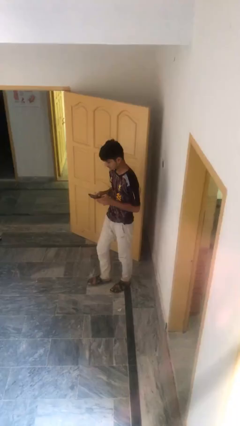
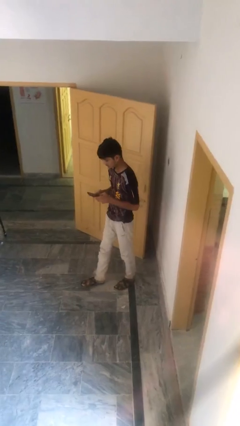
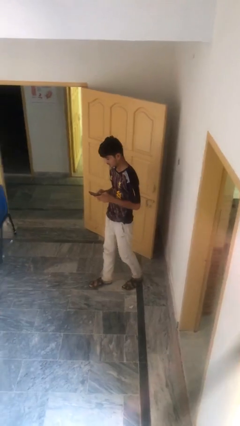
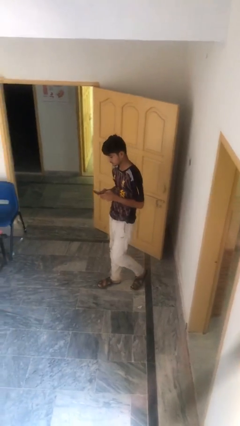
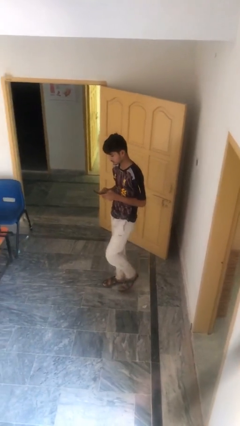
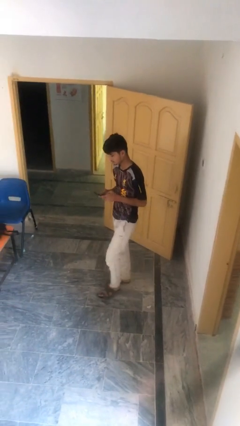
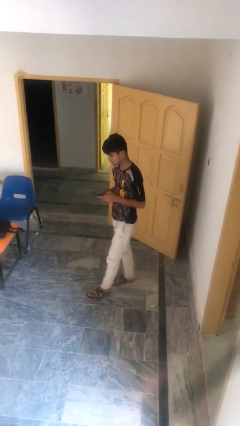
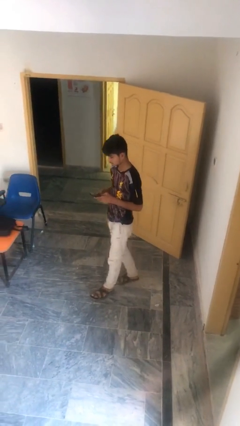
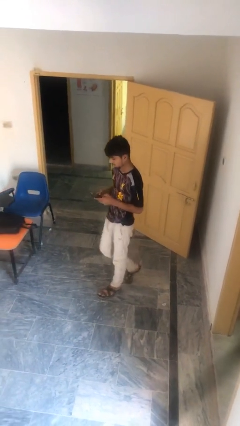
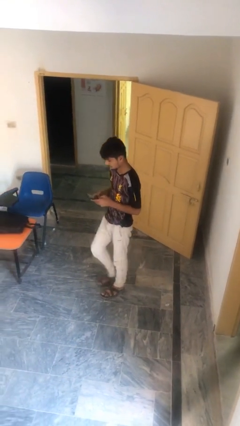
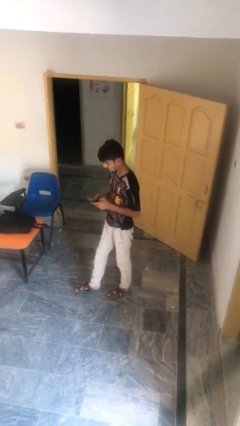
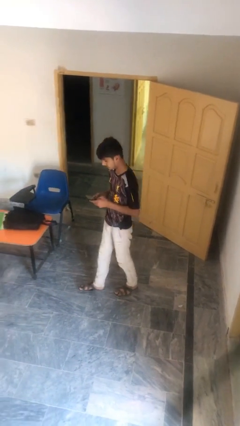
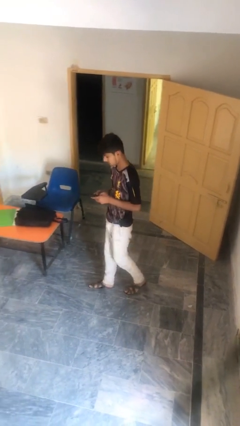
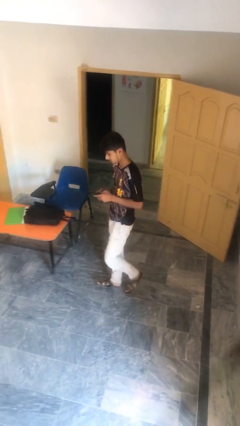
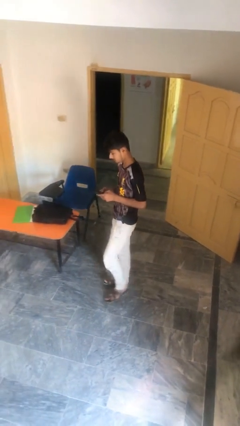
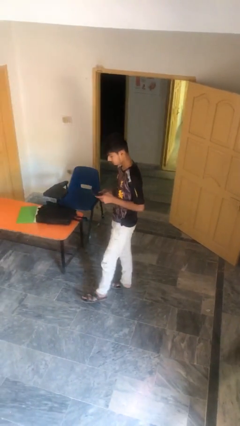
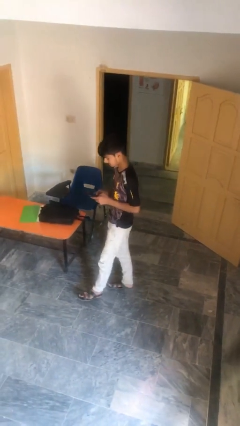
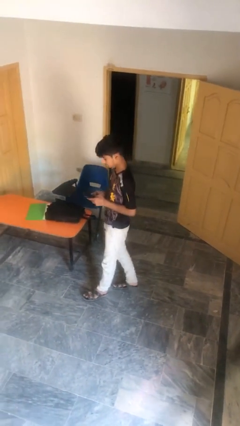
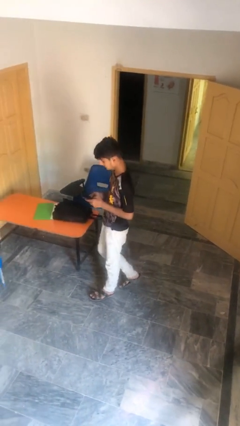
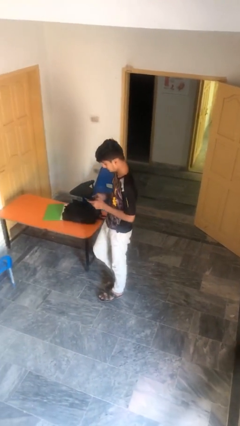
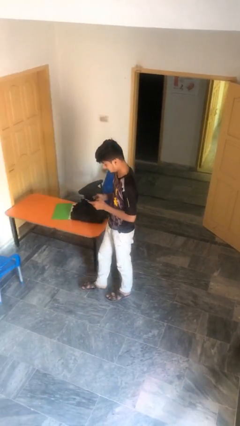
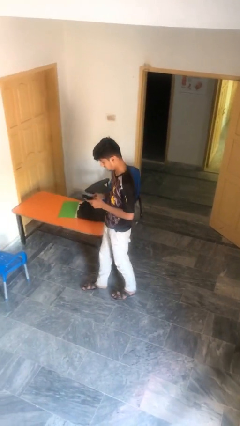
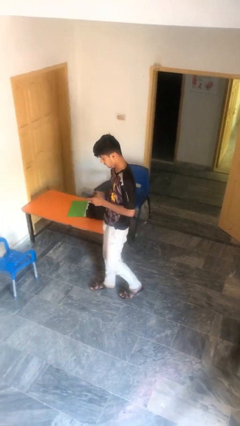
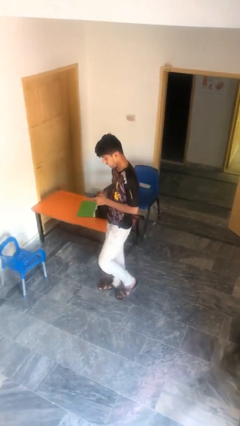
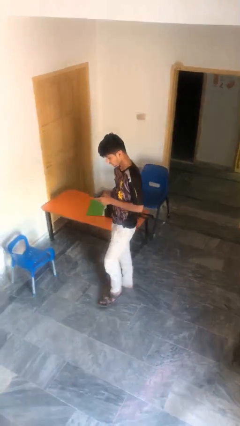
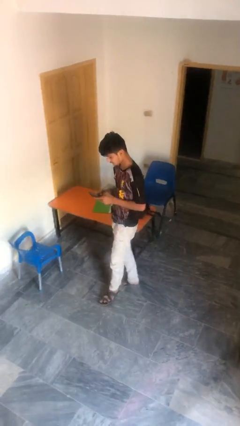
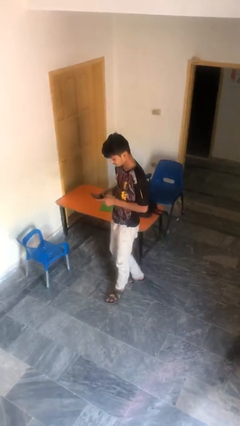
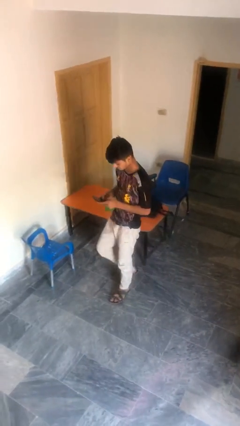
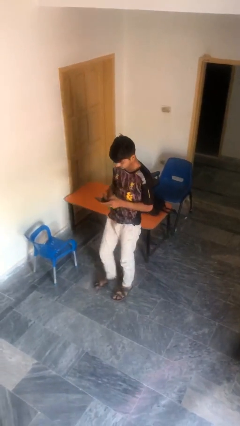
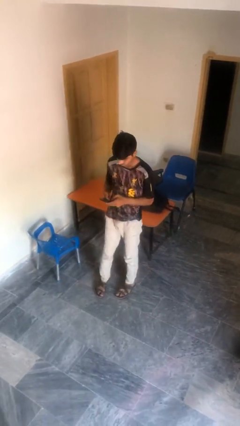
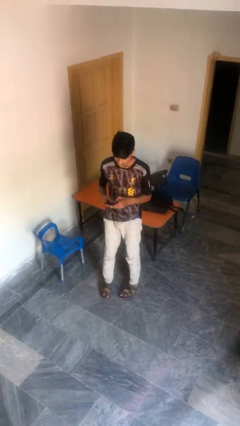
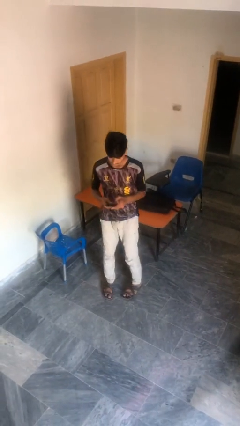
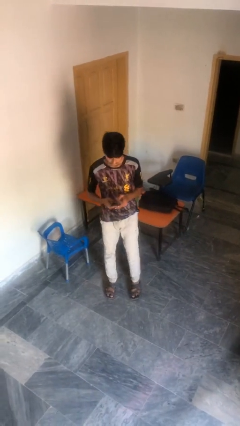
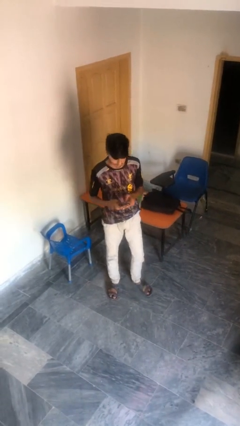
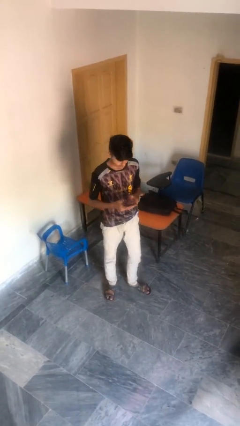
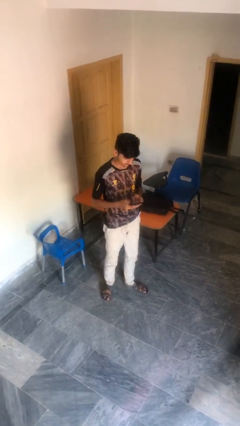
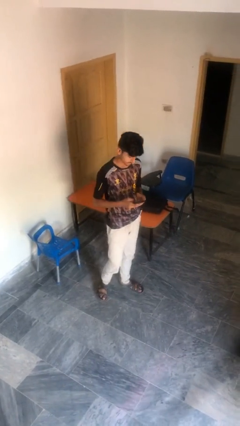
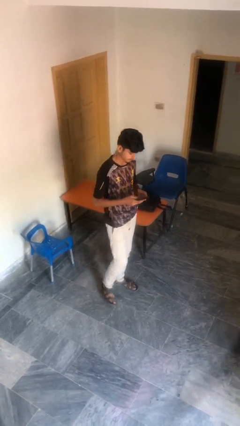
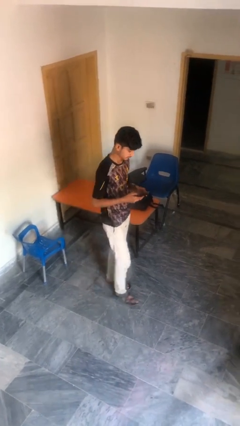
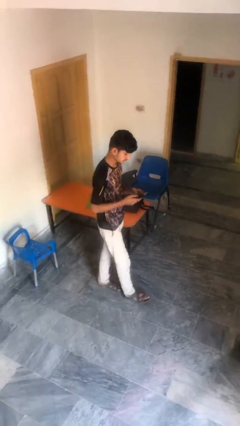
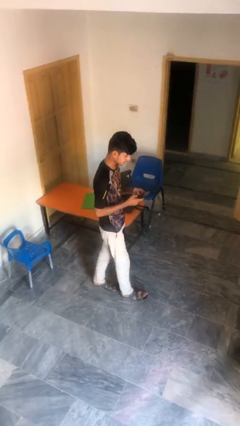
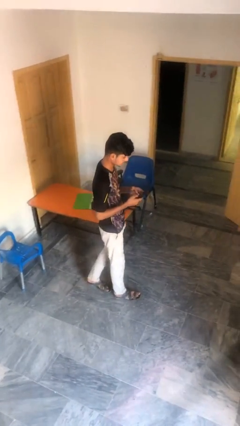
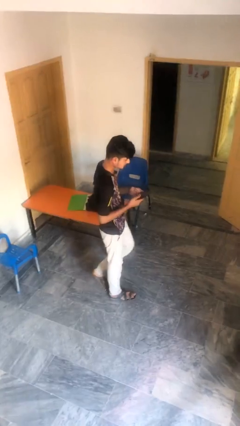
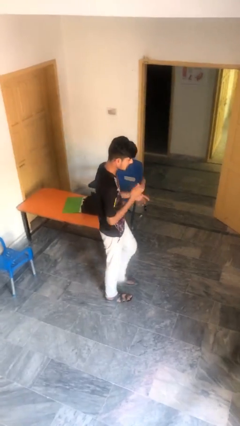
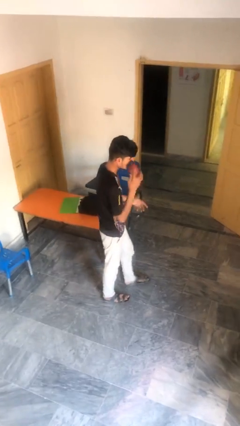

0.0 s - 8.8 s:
person texts on phone

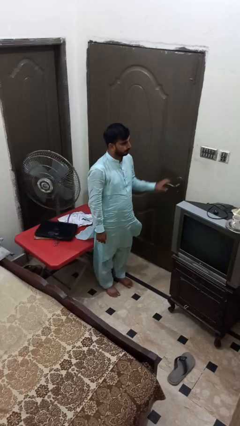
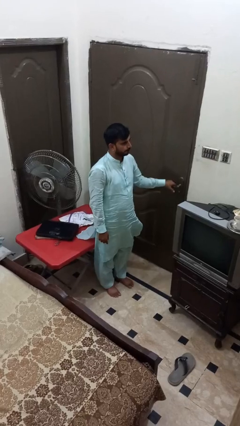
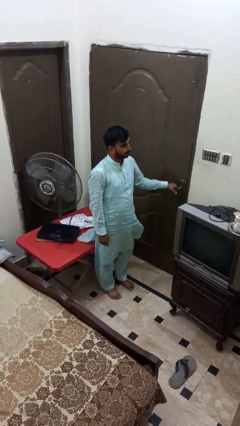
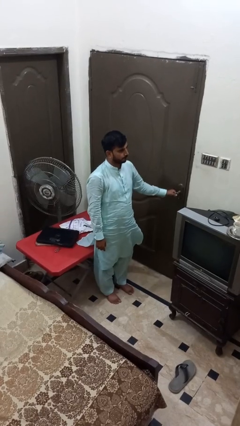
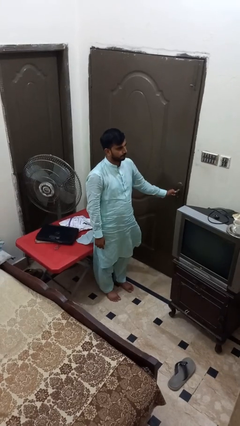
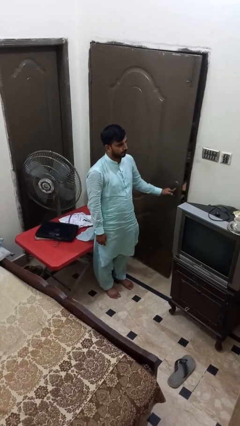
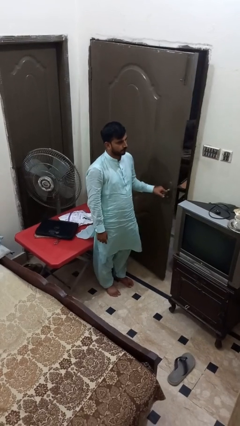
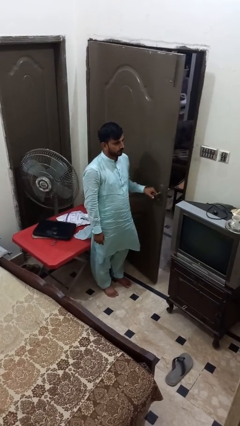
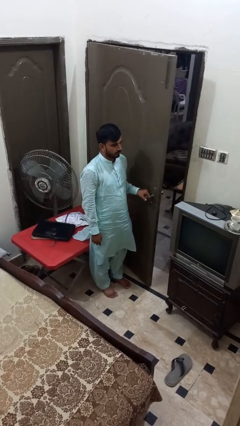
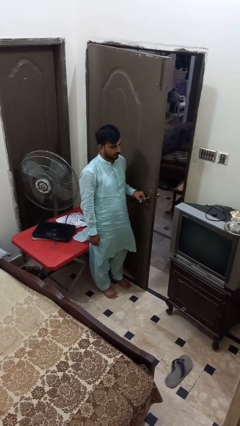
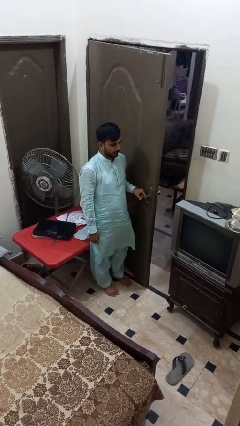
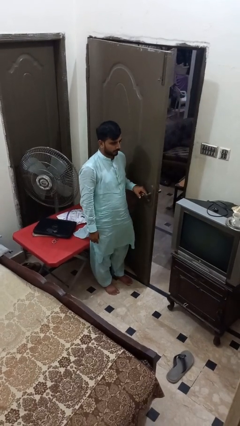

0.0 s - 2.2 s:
person opens facility door

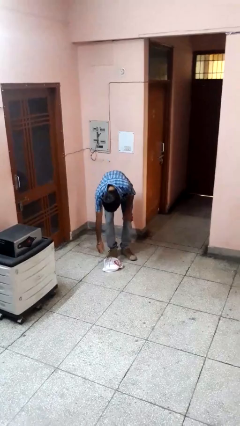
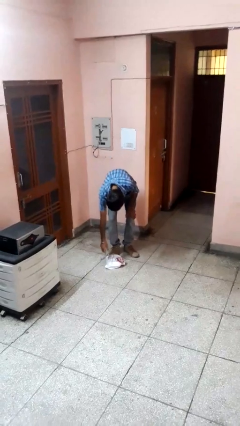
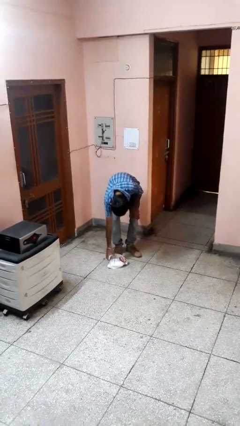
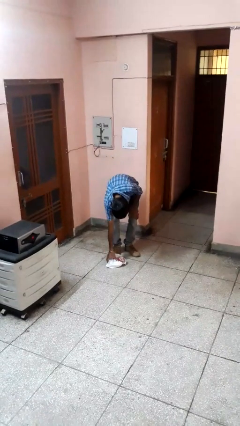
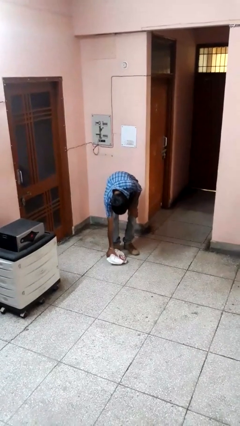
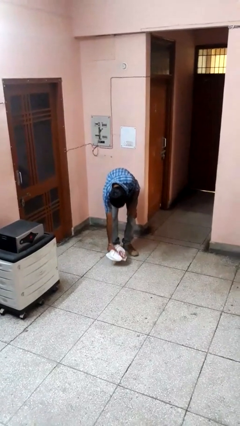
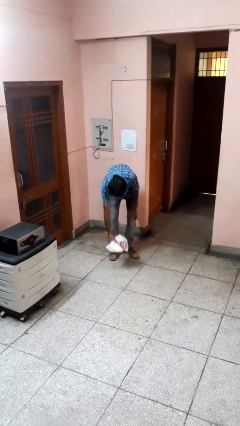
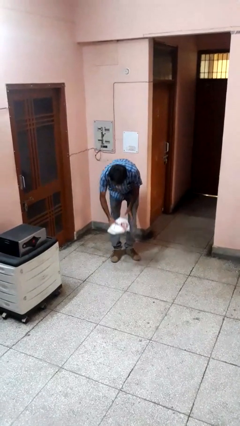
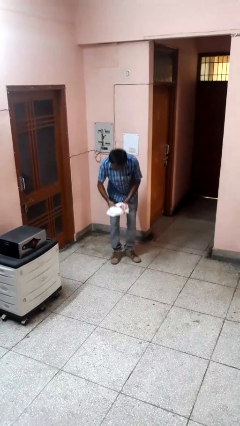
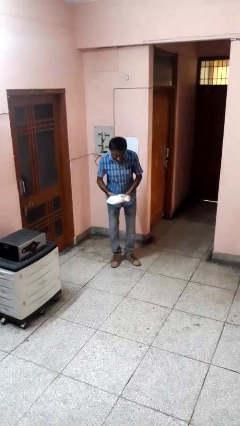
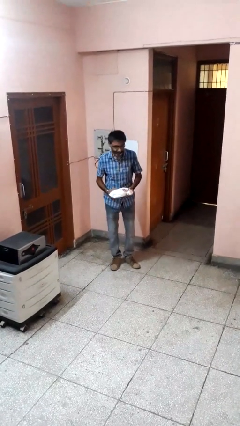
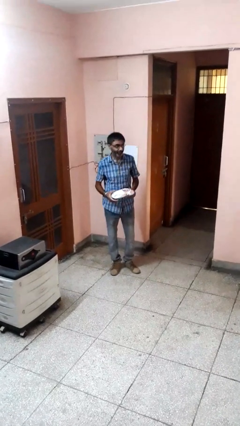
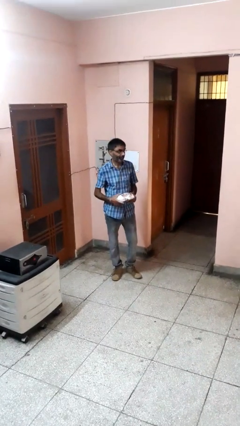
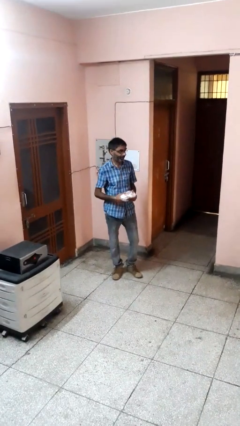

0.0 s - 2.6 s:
person picks up object from floor

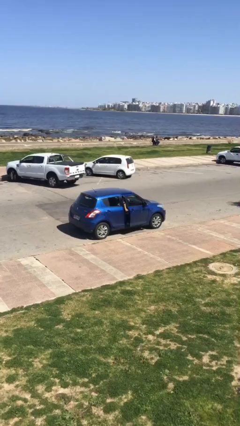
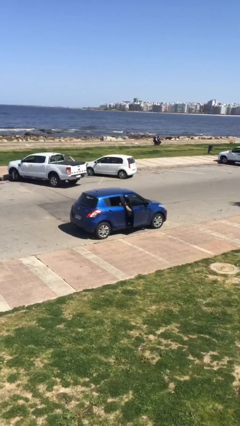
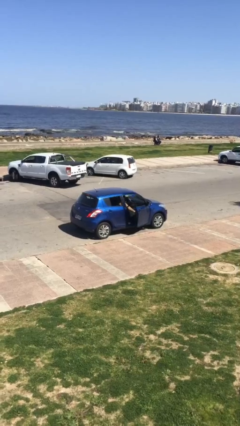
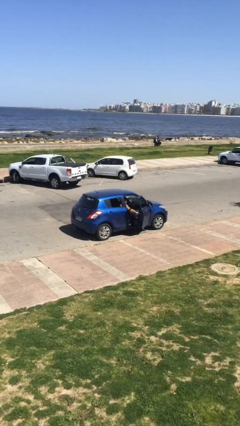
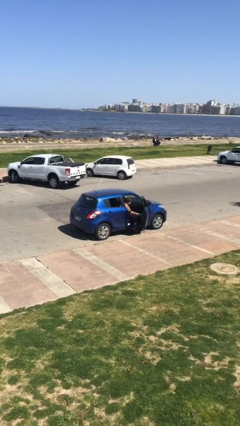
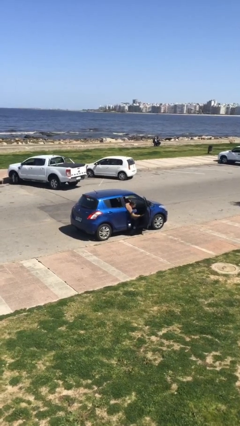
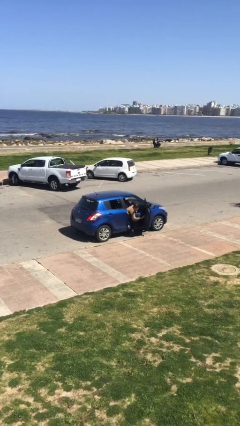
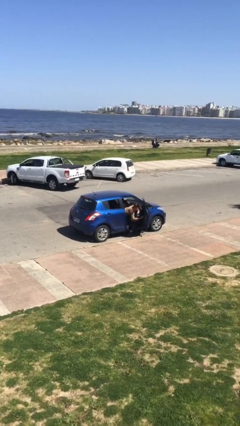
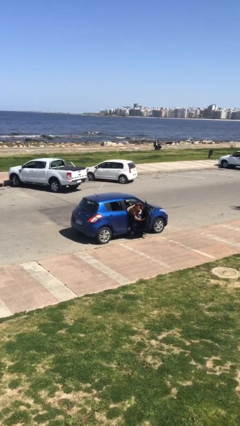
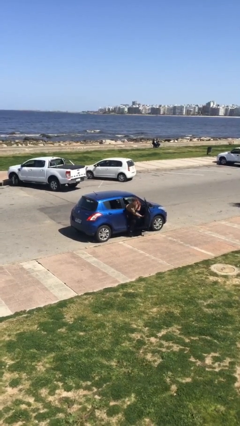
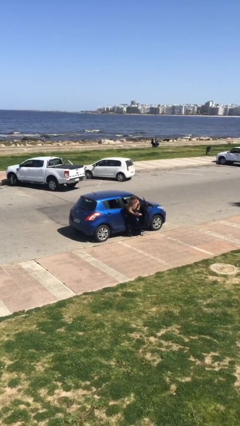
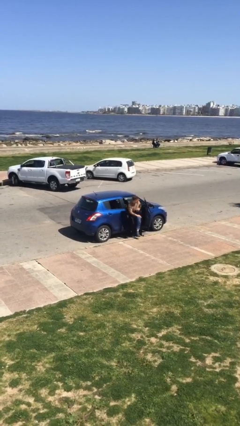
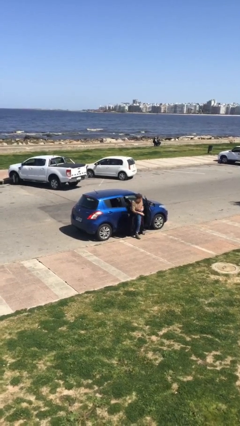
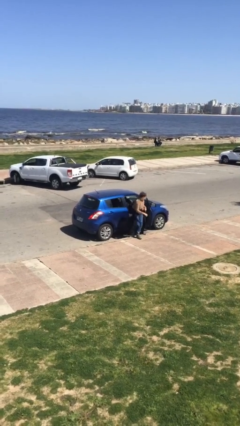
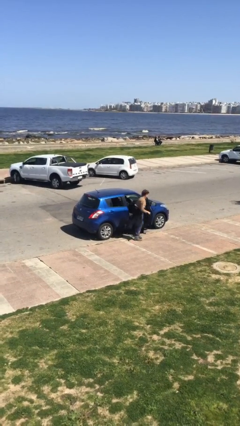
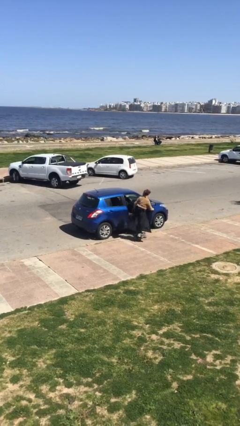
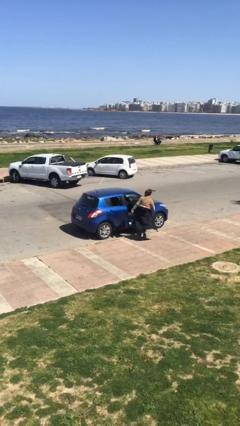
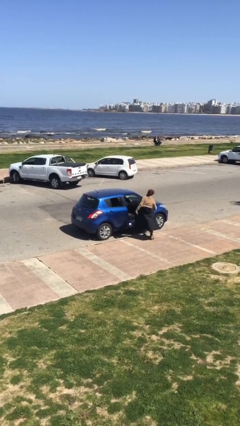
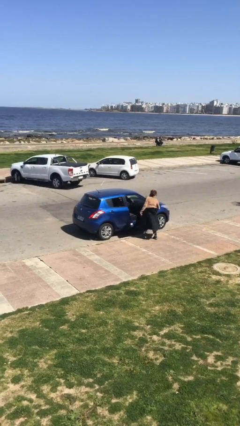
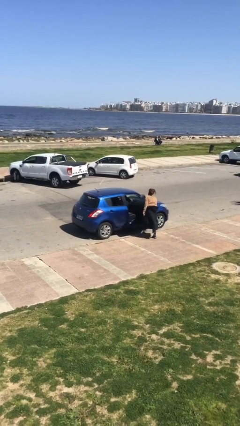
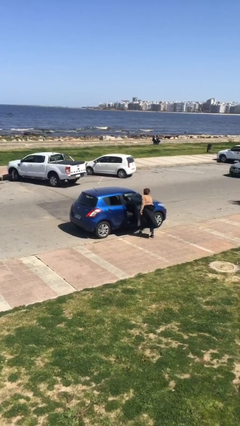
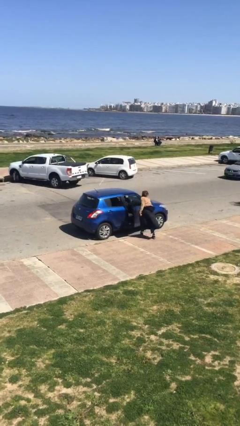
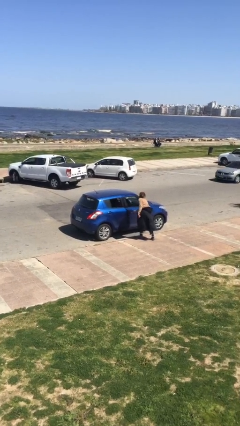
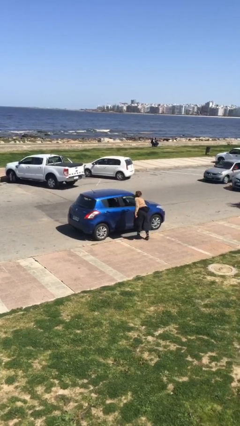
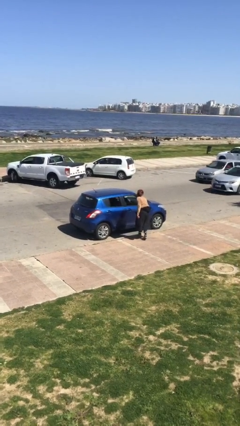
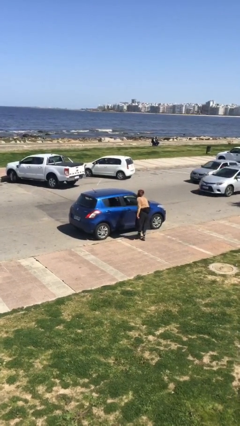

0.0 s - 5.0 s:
car drops off person
